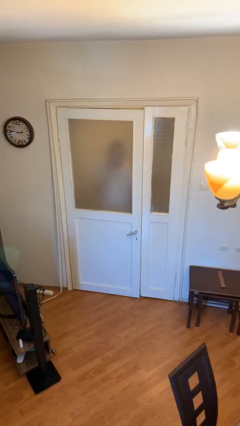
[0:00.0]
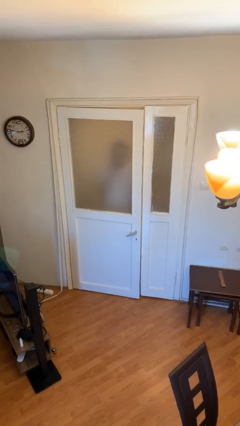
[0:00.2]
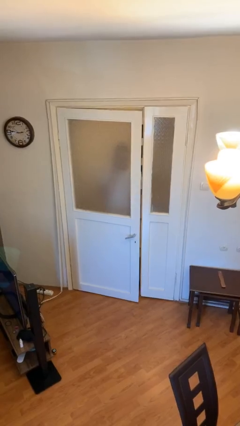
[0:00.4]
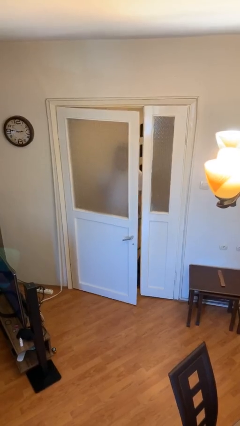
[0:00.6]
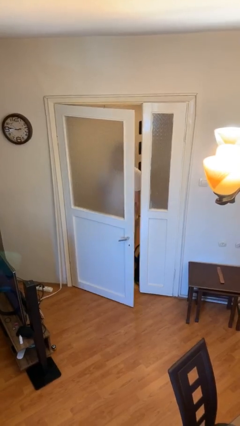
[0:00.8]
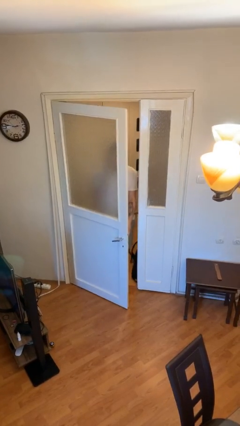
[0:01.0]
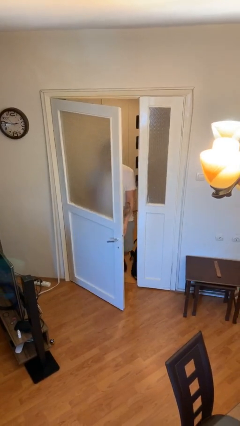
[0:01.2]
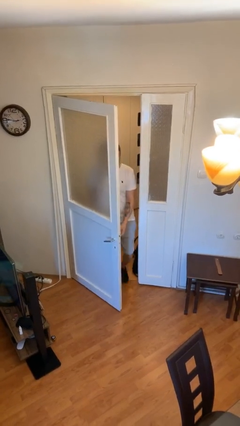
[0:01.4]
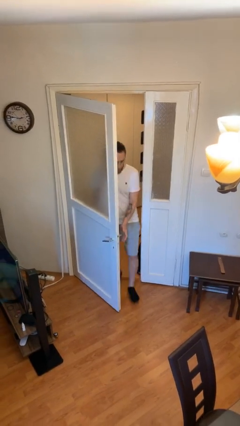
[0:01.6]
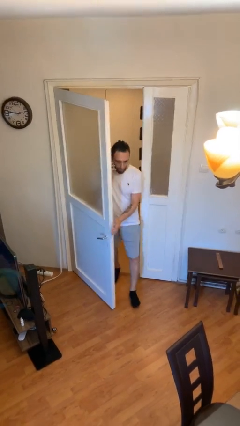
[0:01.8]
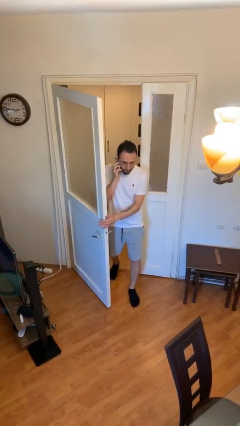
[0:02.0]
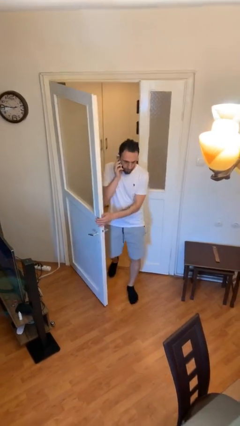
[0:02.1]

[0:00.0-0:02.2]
person opens facility door

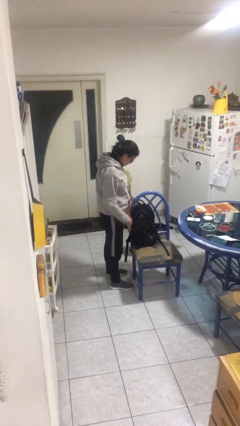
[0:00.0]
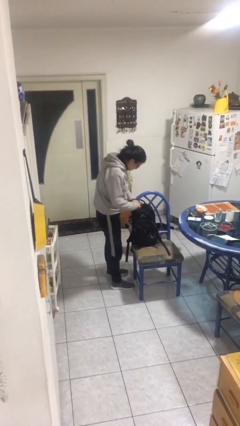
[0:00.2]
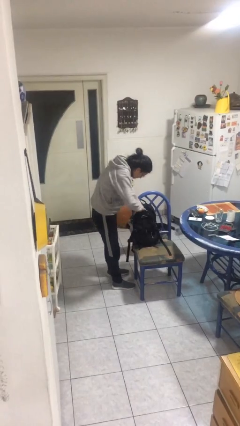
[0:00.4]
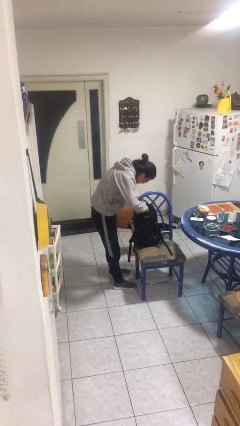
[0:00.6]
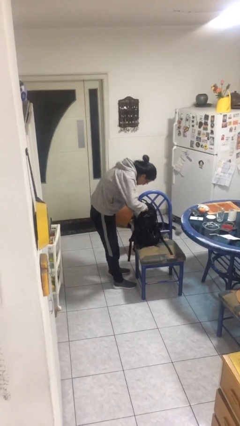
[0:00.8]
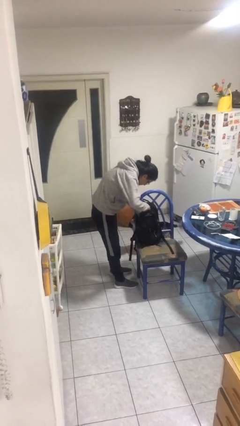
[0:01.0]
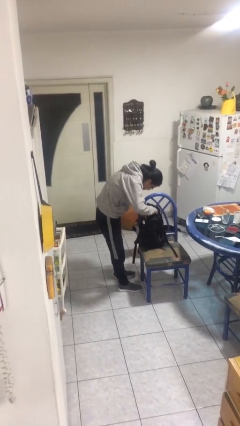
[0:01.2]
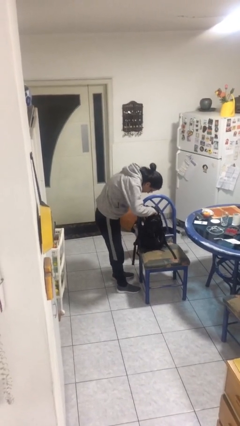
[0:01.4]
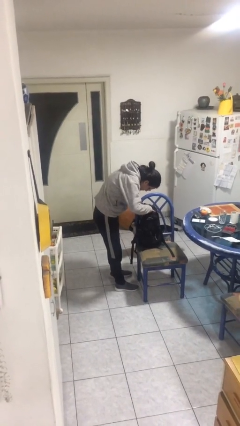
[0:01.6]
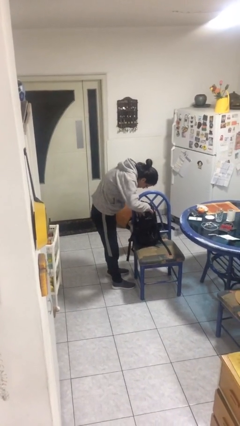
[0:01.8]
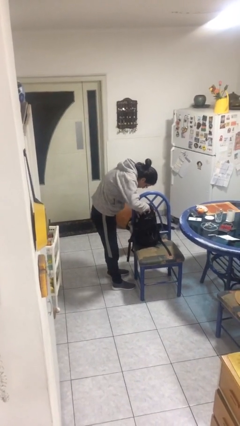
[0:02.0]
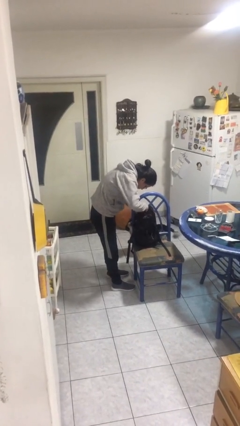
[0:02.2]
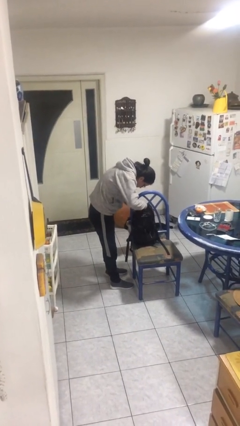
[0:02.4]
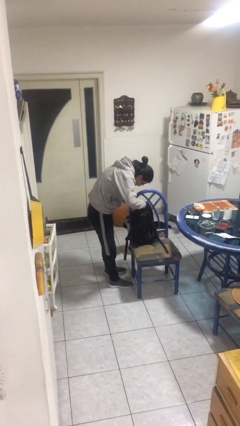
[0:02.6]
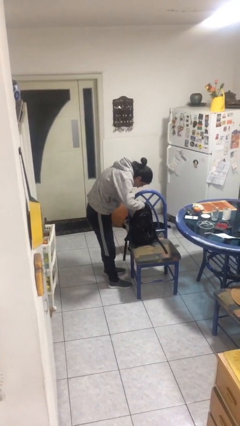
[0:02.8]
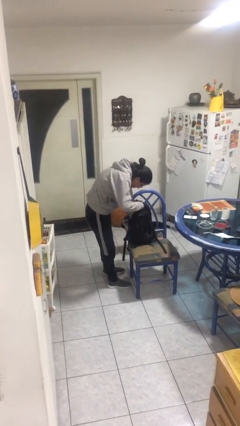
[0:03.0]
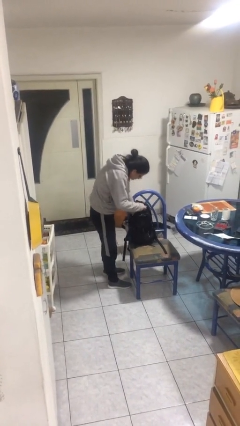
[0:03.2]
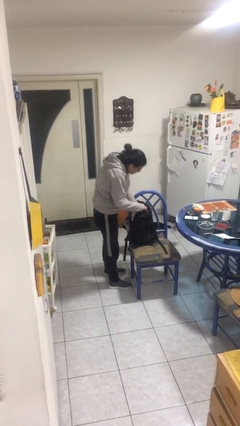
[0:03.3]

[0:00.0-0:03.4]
person searches in backpack

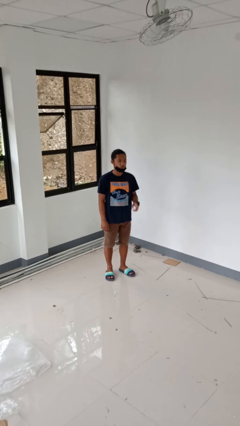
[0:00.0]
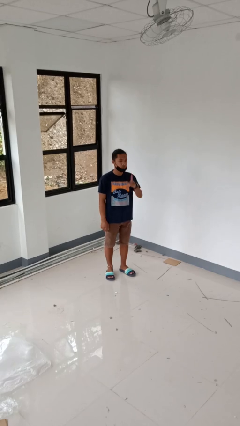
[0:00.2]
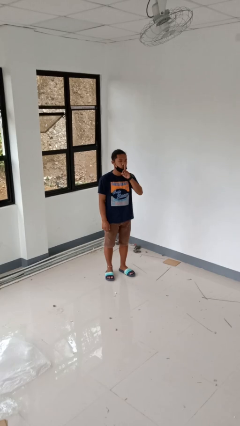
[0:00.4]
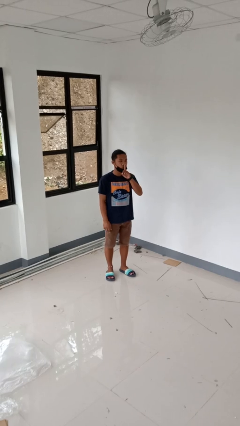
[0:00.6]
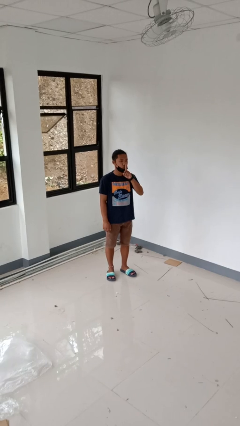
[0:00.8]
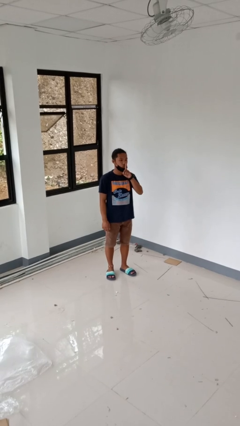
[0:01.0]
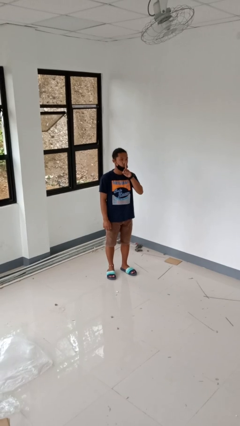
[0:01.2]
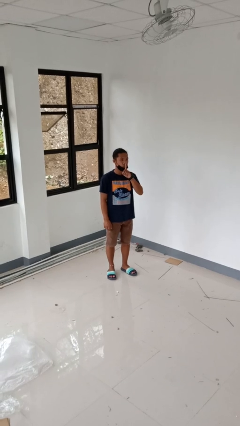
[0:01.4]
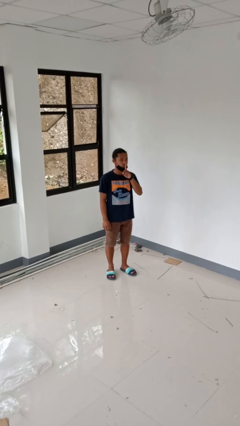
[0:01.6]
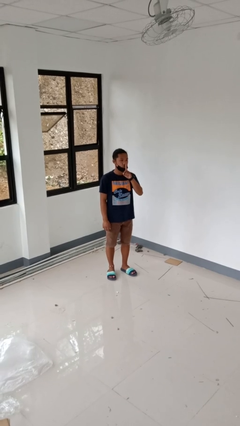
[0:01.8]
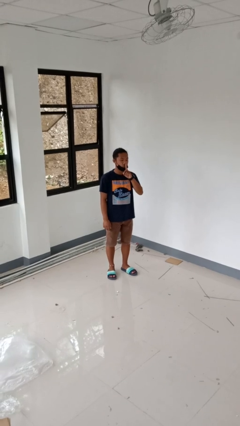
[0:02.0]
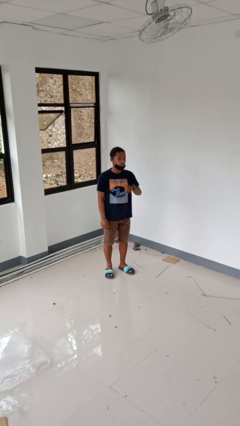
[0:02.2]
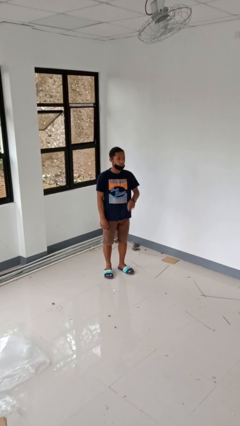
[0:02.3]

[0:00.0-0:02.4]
person gestures be quiet

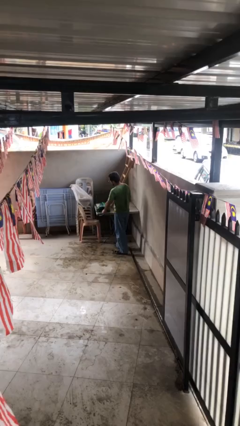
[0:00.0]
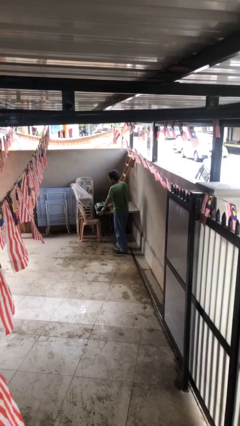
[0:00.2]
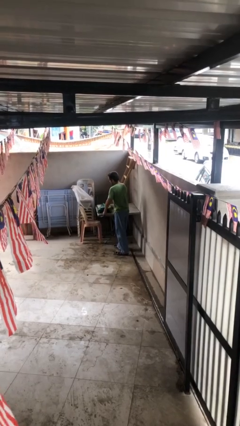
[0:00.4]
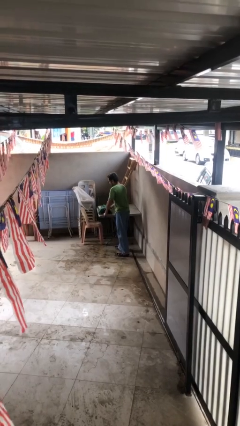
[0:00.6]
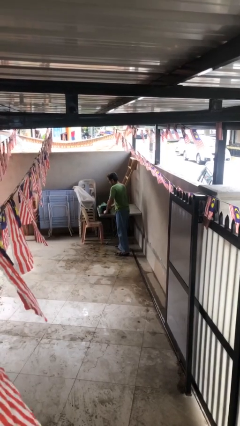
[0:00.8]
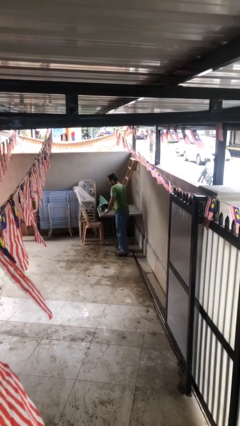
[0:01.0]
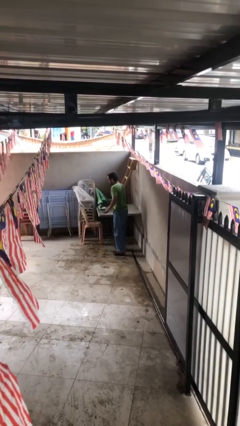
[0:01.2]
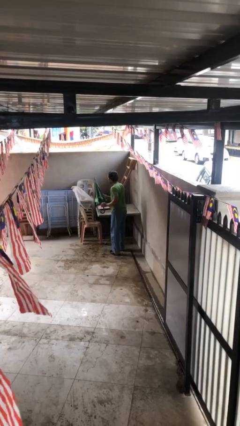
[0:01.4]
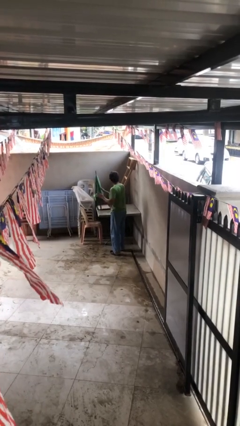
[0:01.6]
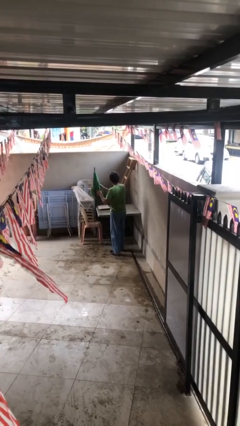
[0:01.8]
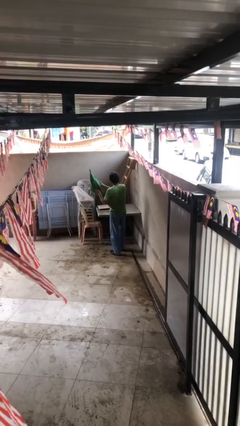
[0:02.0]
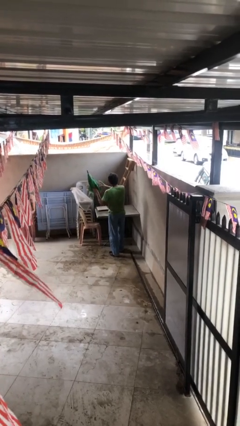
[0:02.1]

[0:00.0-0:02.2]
person picks up object from table

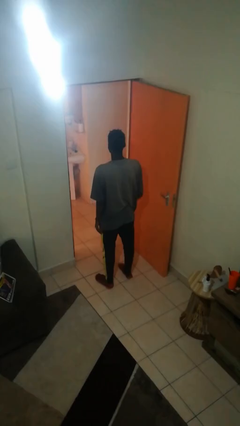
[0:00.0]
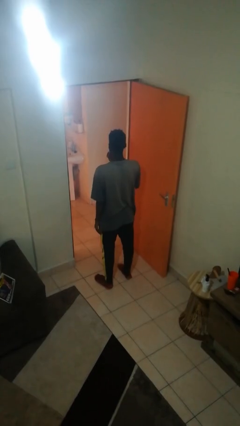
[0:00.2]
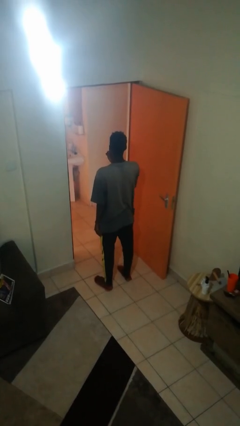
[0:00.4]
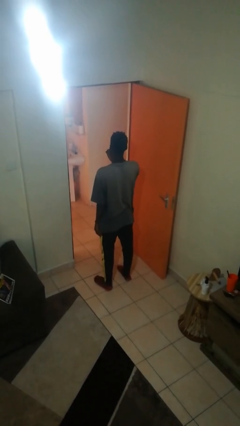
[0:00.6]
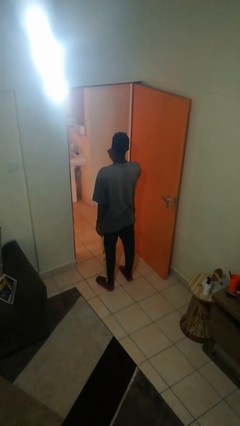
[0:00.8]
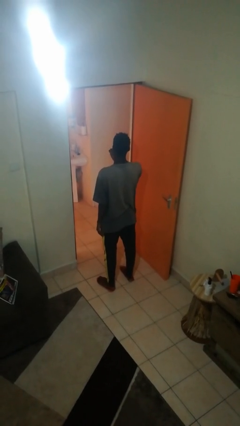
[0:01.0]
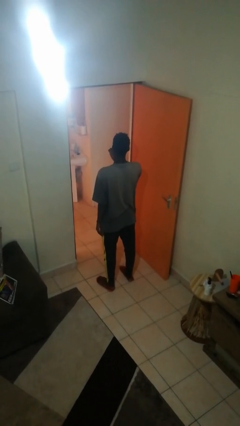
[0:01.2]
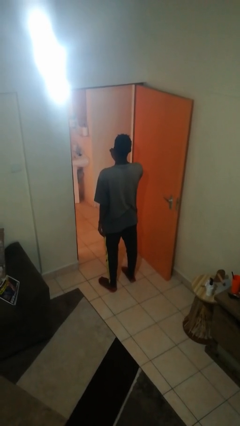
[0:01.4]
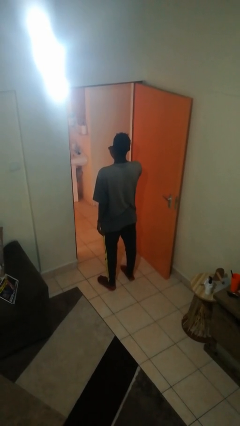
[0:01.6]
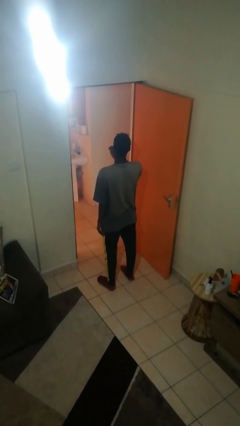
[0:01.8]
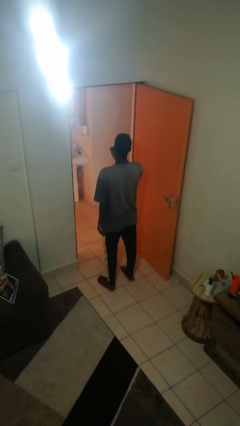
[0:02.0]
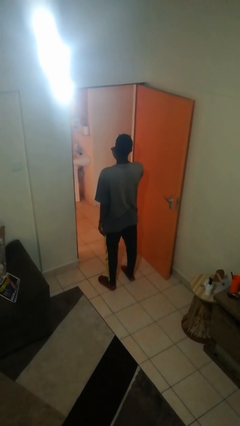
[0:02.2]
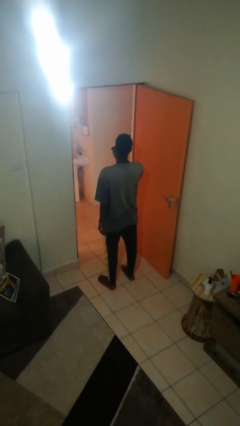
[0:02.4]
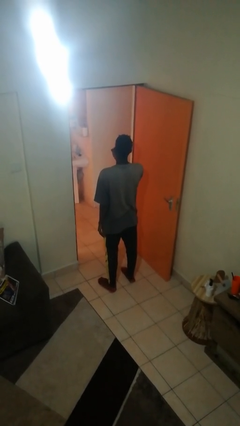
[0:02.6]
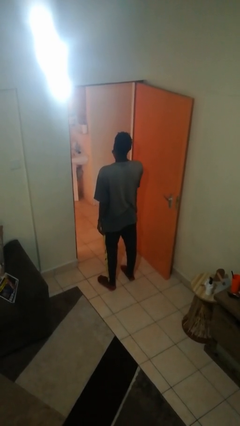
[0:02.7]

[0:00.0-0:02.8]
person brushes teeth

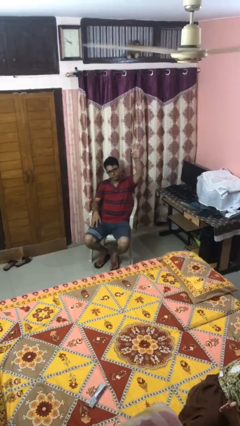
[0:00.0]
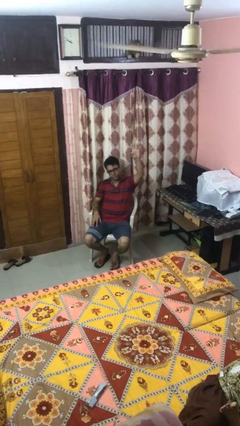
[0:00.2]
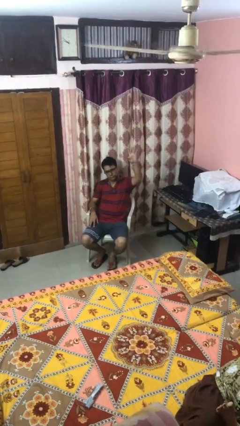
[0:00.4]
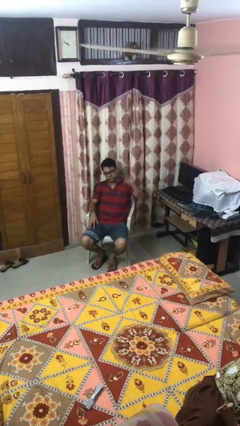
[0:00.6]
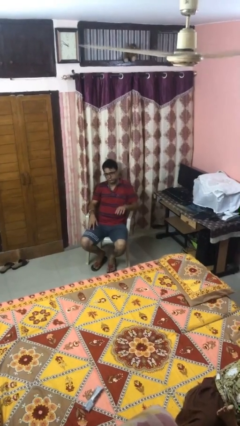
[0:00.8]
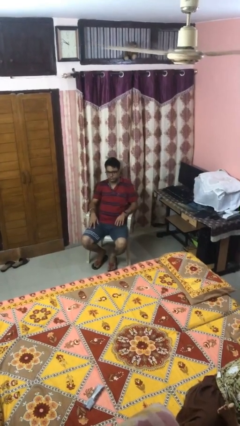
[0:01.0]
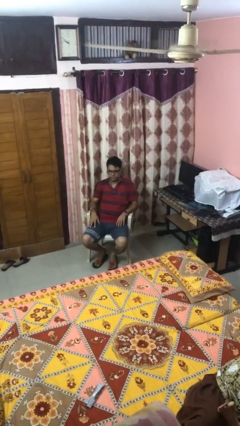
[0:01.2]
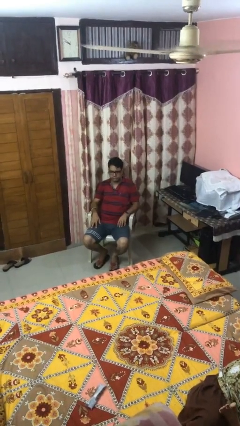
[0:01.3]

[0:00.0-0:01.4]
person gestures lower hand

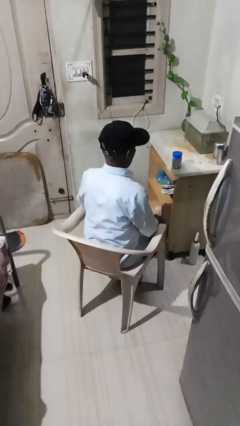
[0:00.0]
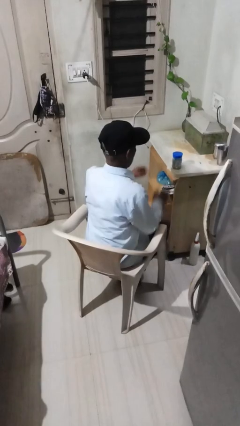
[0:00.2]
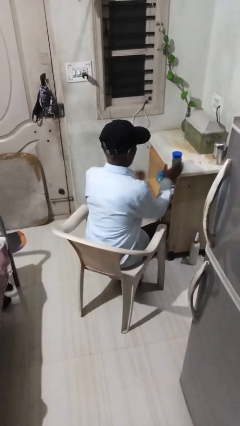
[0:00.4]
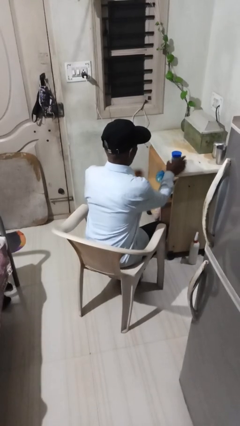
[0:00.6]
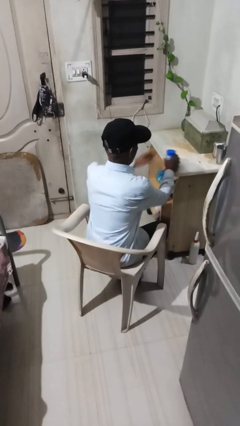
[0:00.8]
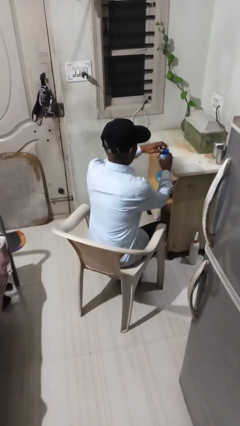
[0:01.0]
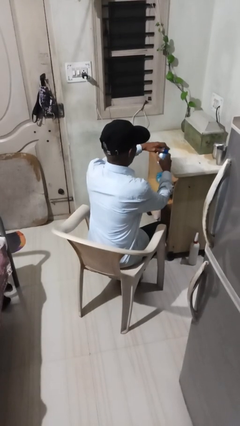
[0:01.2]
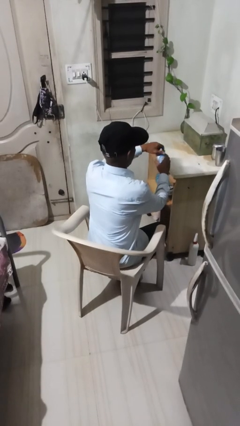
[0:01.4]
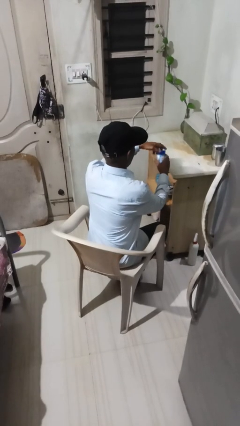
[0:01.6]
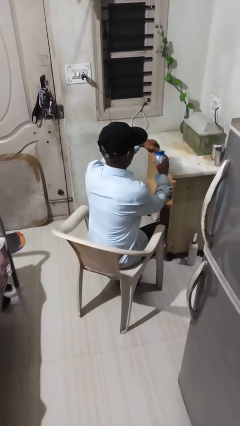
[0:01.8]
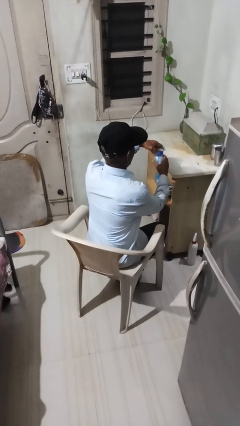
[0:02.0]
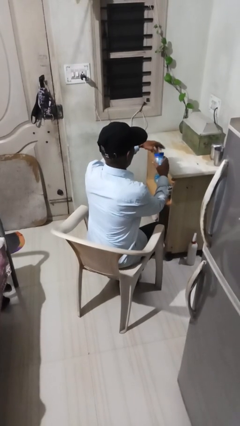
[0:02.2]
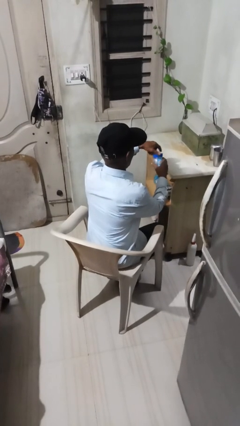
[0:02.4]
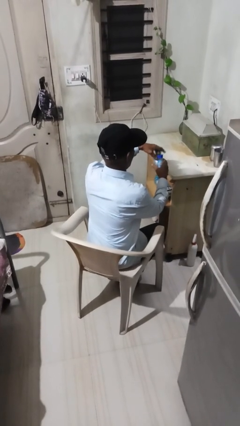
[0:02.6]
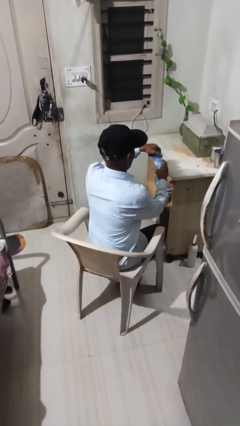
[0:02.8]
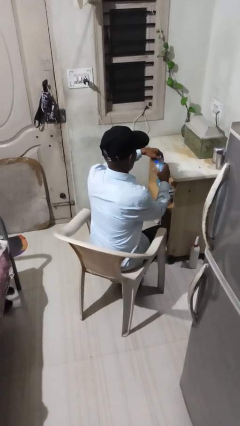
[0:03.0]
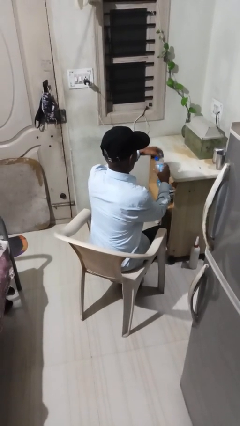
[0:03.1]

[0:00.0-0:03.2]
person opens jar
